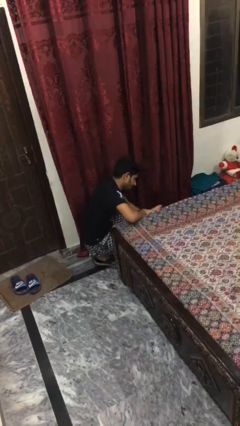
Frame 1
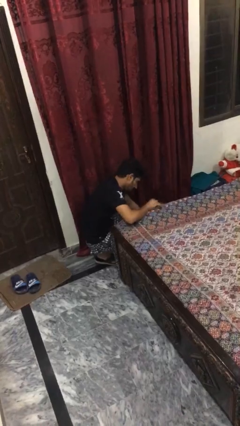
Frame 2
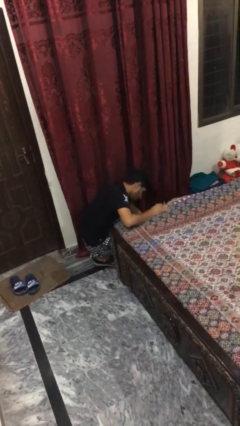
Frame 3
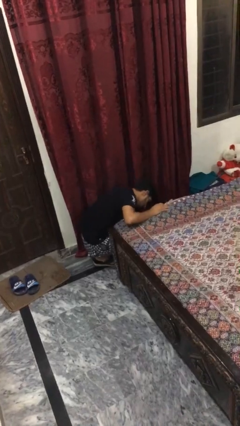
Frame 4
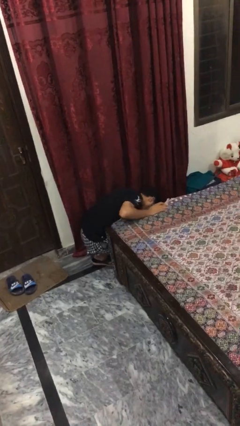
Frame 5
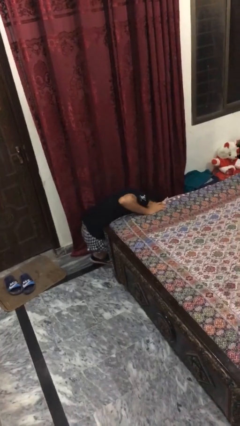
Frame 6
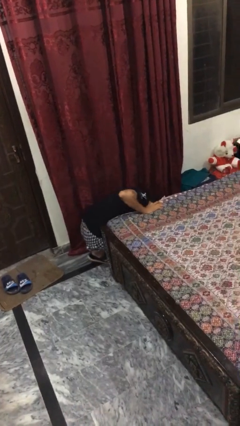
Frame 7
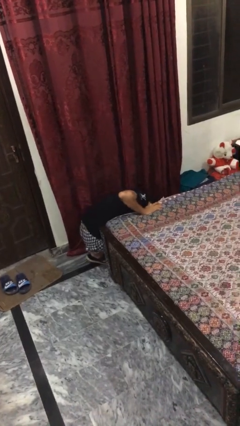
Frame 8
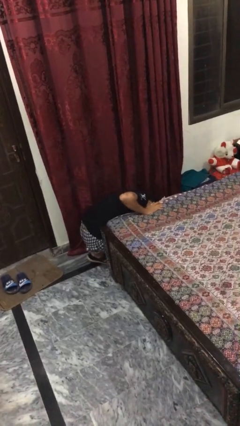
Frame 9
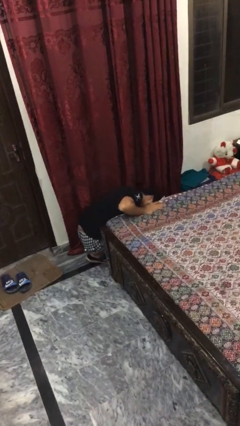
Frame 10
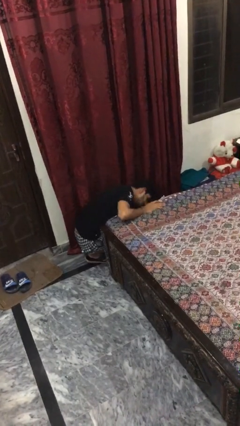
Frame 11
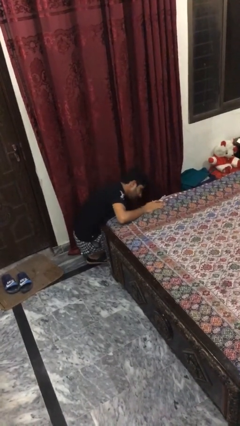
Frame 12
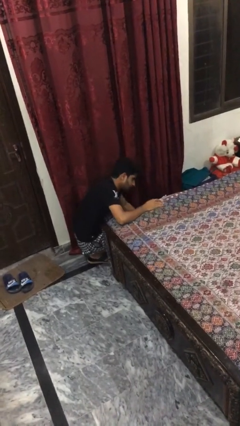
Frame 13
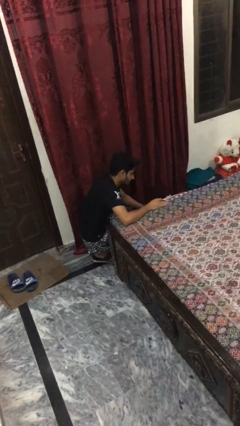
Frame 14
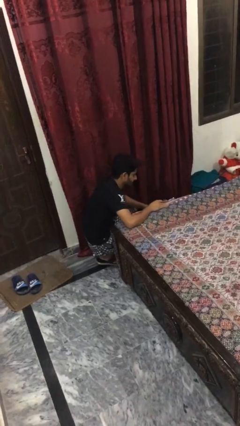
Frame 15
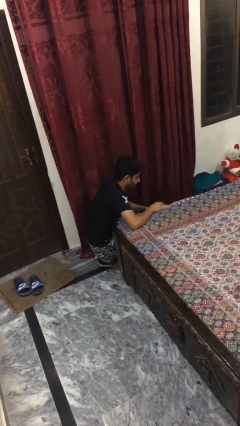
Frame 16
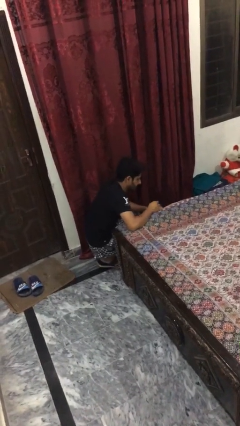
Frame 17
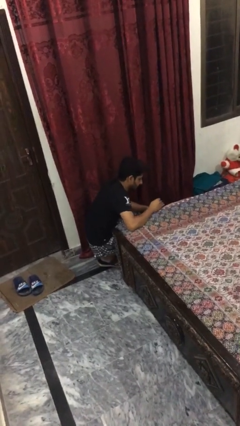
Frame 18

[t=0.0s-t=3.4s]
person searches under bed

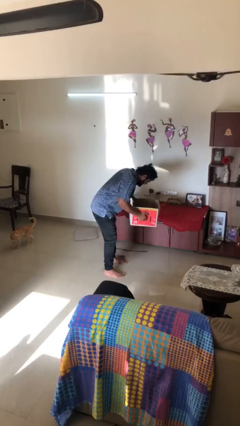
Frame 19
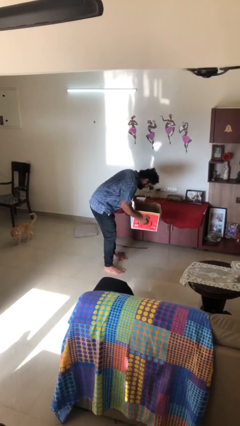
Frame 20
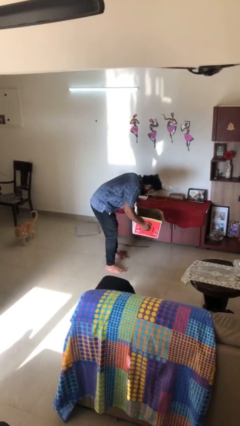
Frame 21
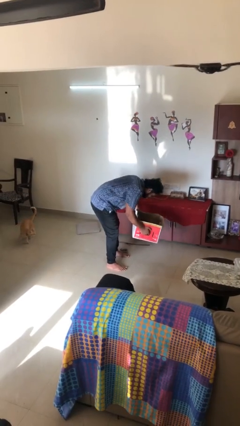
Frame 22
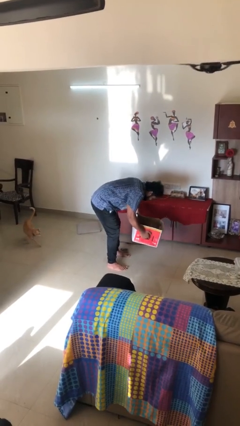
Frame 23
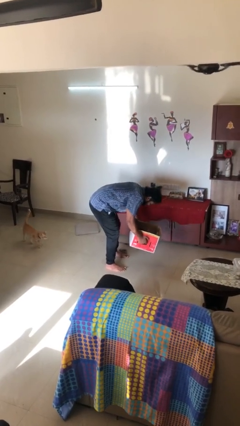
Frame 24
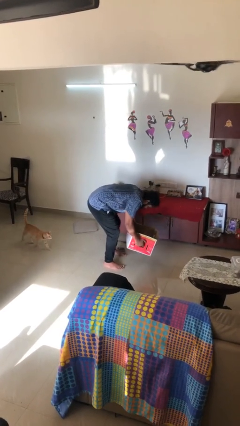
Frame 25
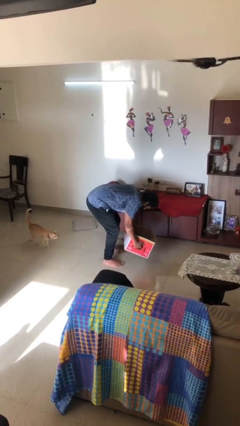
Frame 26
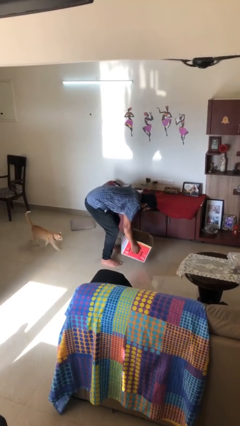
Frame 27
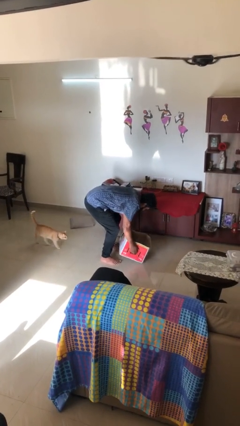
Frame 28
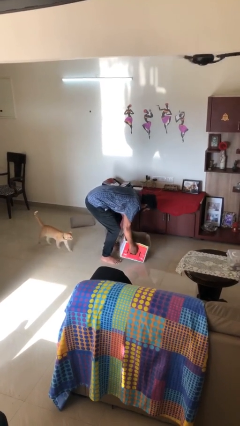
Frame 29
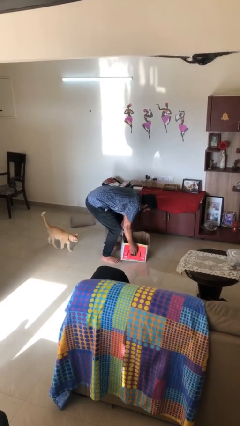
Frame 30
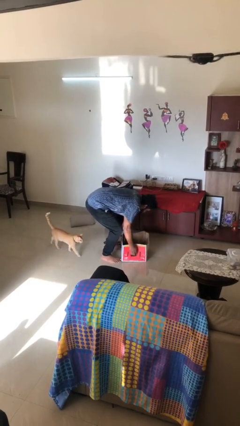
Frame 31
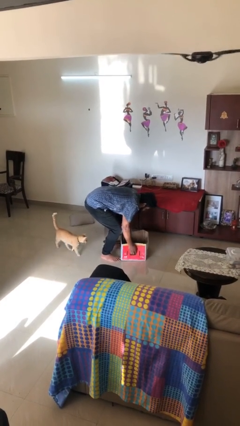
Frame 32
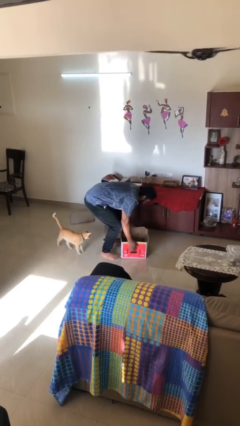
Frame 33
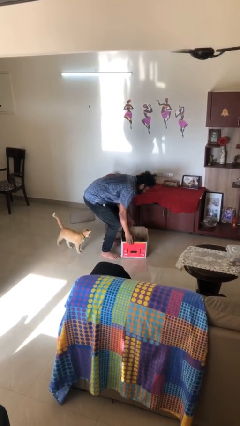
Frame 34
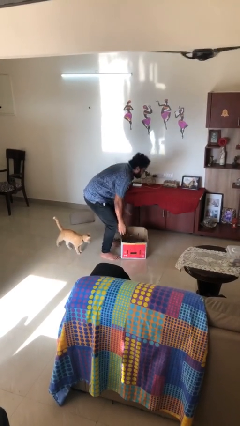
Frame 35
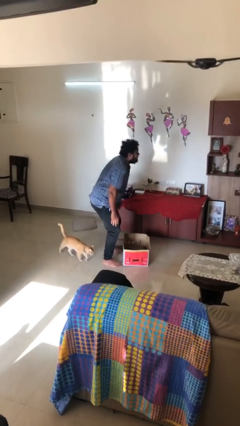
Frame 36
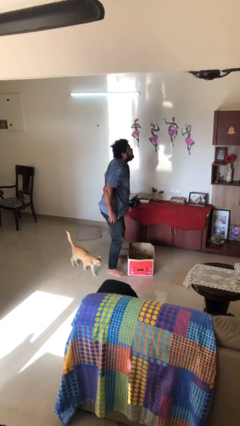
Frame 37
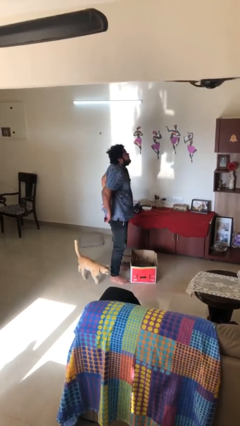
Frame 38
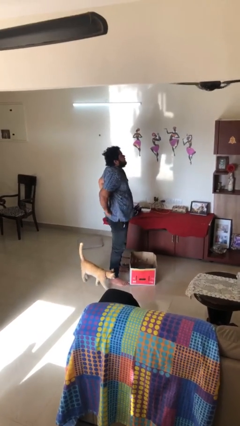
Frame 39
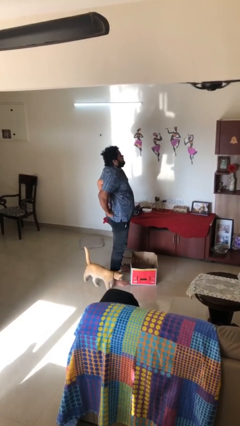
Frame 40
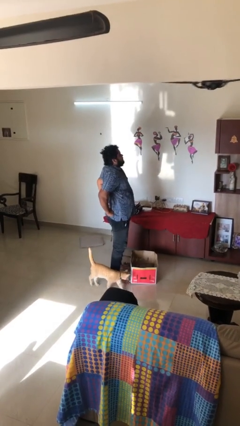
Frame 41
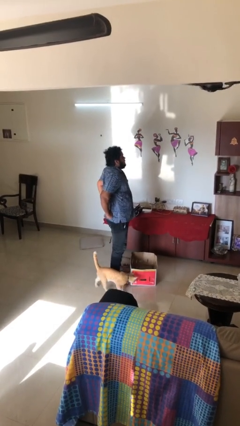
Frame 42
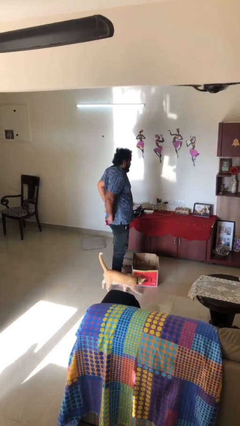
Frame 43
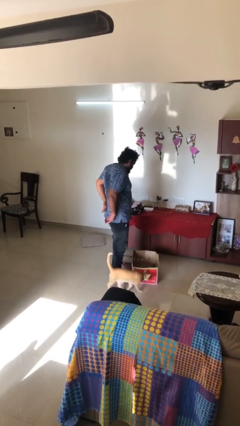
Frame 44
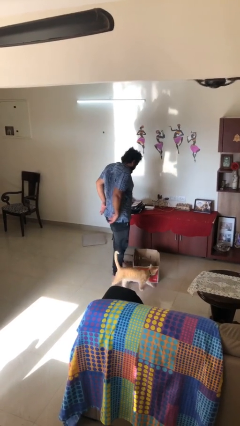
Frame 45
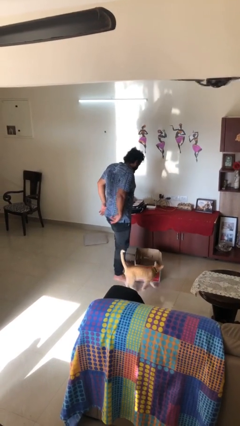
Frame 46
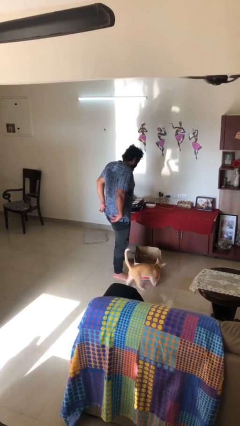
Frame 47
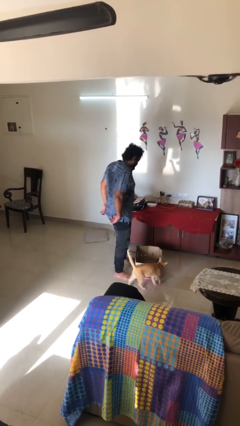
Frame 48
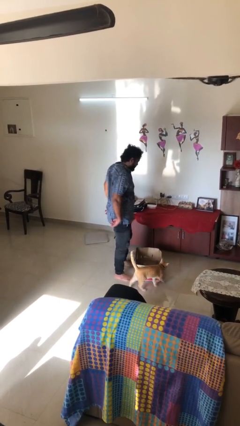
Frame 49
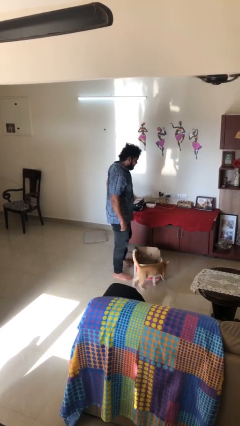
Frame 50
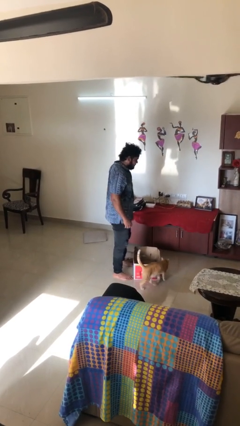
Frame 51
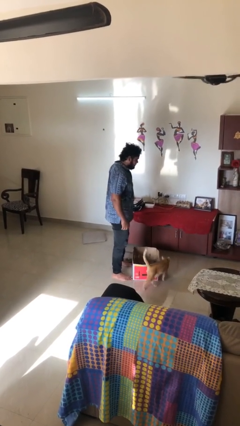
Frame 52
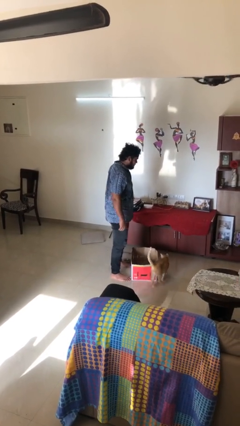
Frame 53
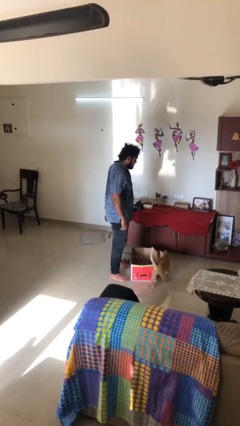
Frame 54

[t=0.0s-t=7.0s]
person puts down object on floor

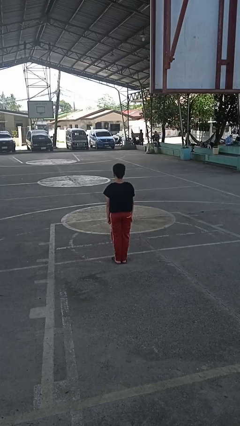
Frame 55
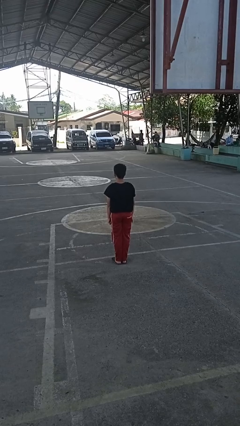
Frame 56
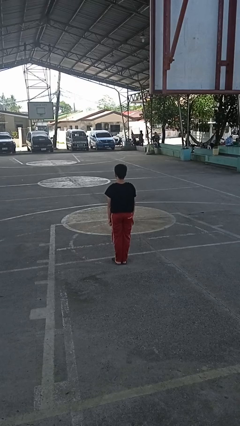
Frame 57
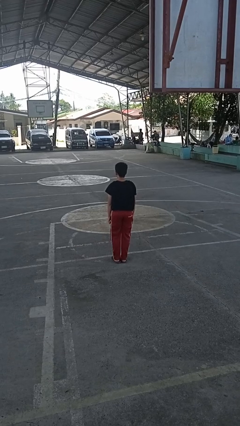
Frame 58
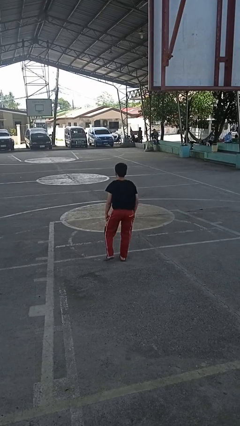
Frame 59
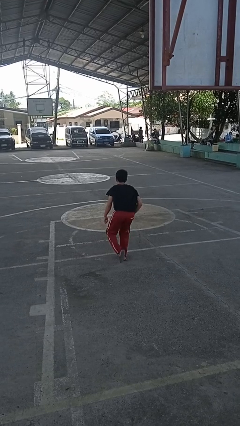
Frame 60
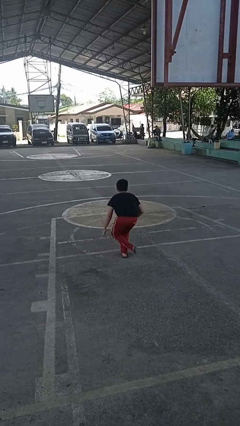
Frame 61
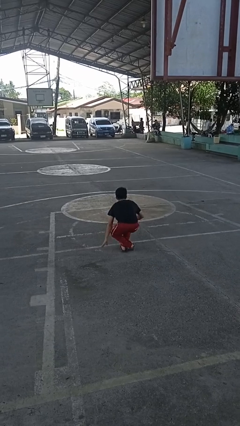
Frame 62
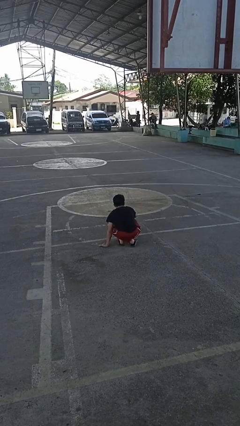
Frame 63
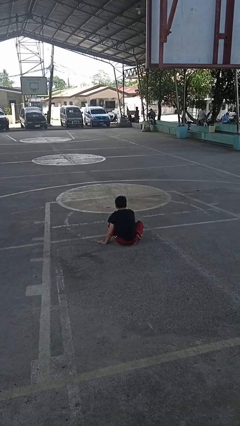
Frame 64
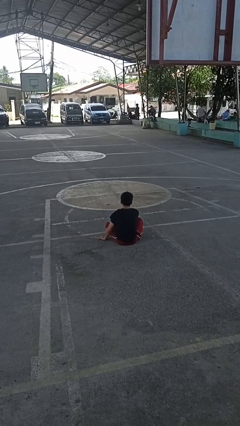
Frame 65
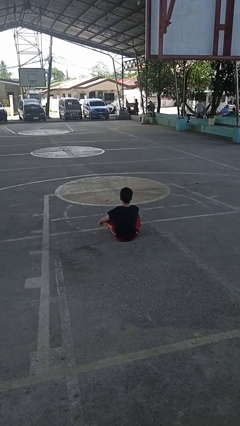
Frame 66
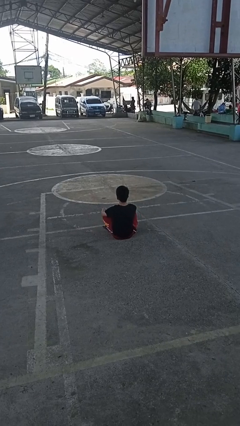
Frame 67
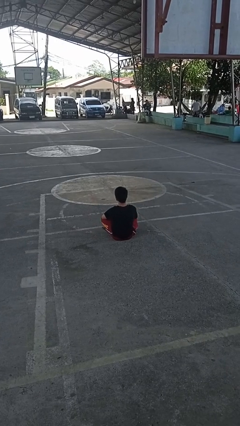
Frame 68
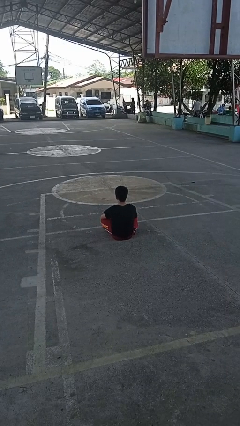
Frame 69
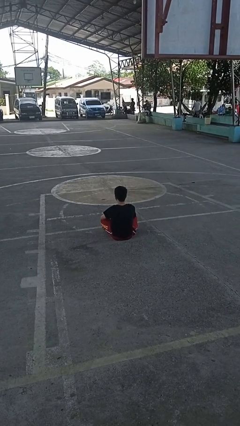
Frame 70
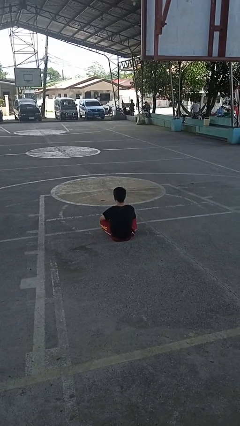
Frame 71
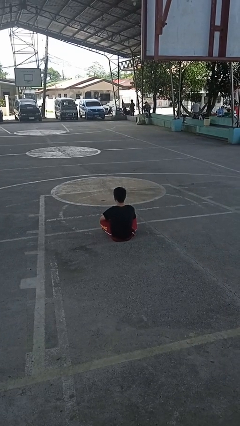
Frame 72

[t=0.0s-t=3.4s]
person sits crisscross

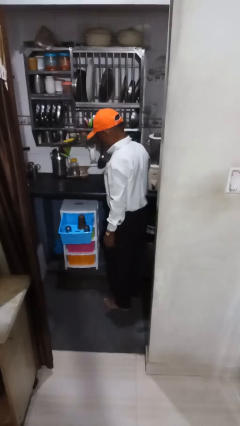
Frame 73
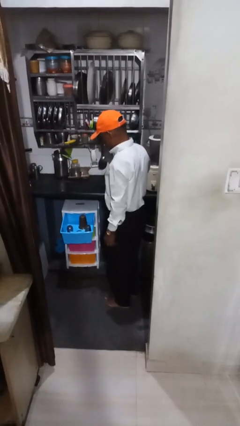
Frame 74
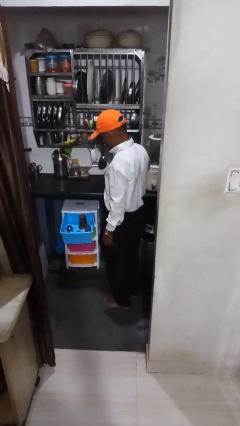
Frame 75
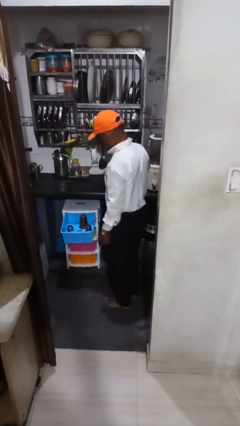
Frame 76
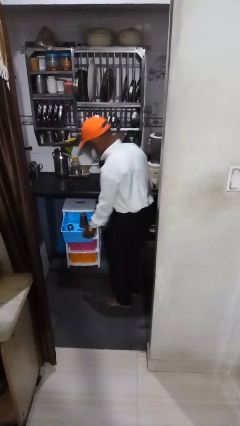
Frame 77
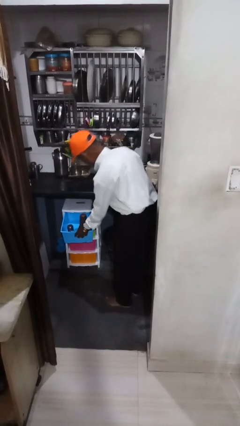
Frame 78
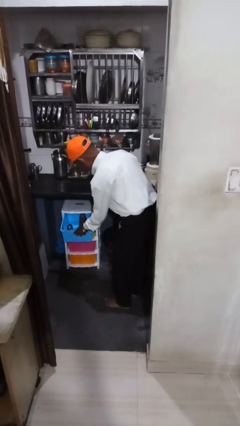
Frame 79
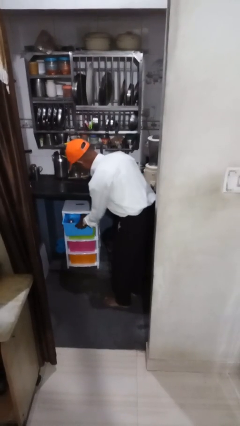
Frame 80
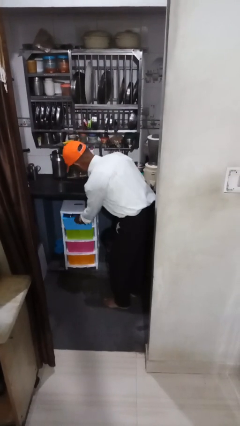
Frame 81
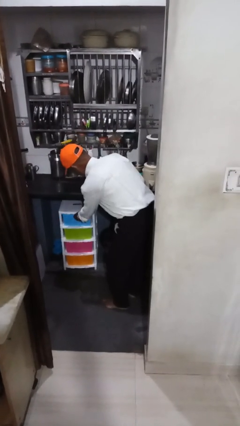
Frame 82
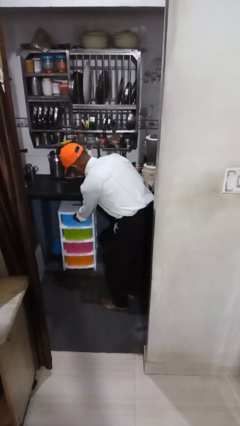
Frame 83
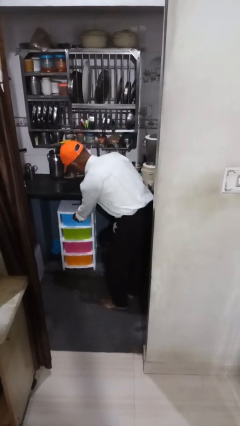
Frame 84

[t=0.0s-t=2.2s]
person closes kitchen drawer

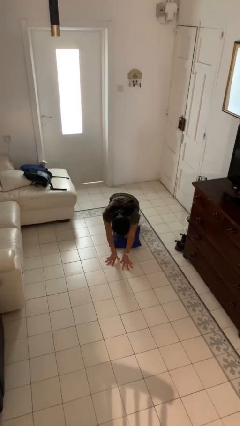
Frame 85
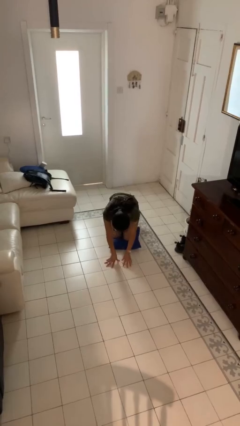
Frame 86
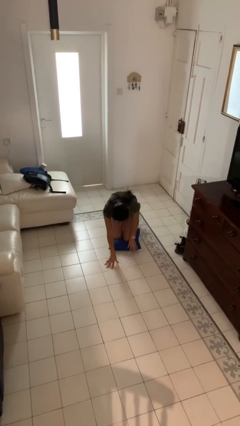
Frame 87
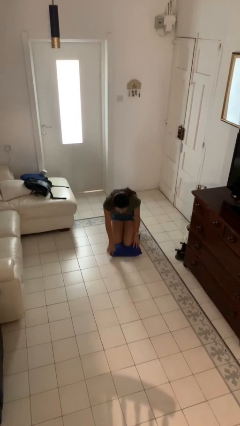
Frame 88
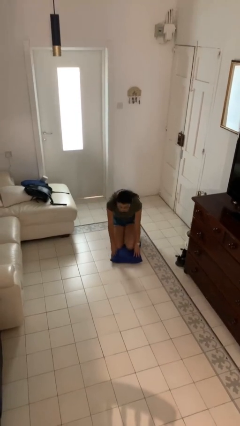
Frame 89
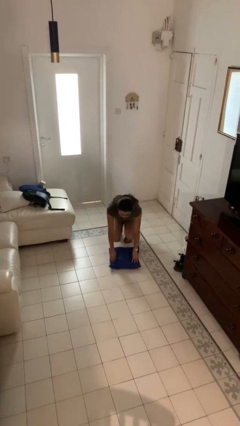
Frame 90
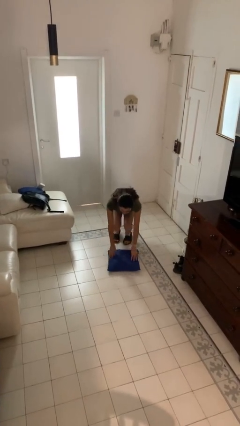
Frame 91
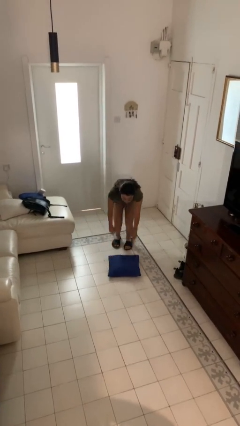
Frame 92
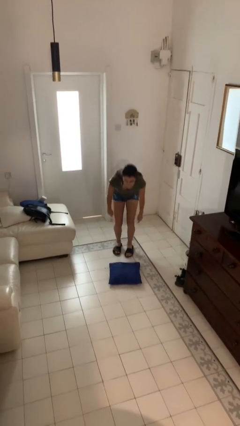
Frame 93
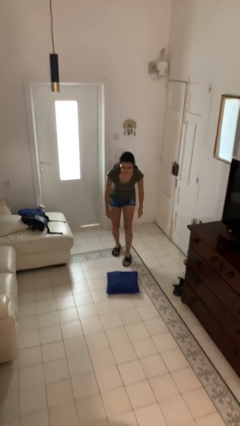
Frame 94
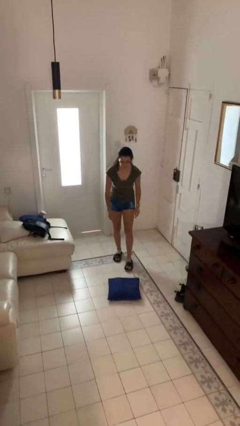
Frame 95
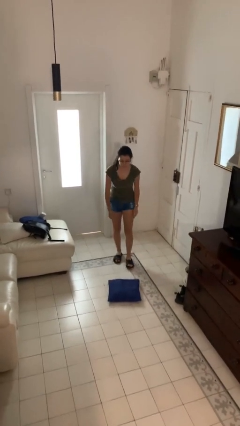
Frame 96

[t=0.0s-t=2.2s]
person stands up from floor
